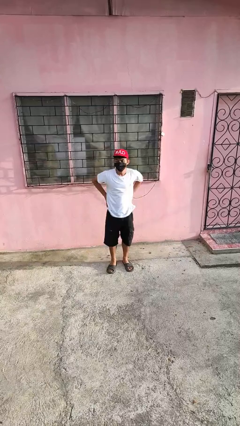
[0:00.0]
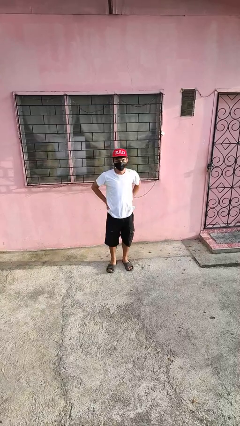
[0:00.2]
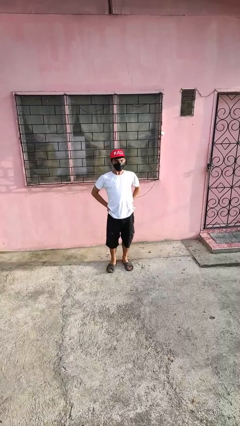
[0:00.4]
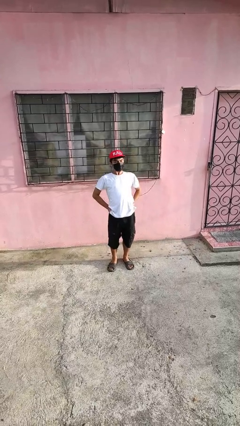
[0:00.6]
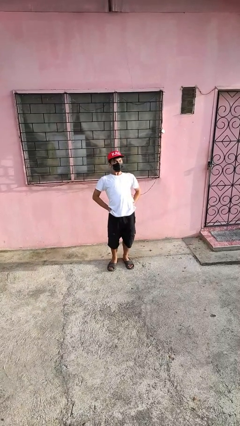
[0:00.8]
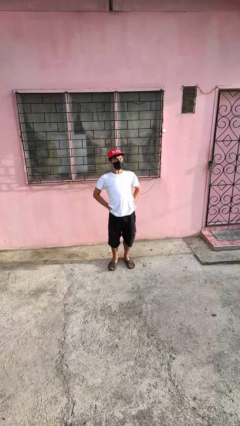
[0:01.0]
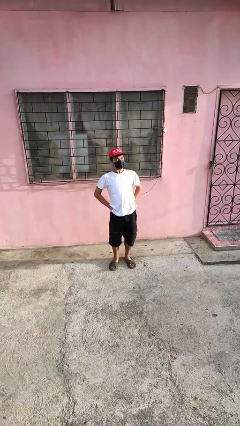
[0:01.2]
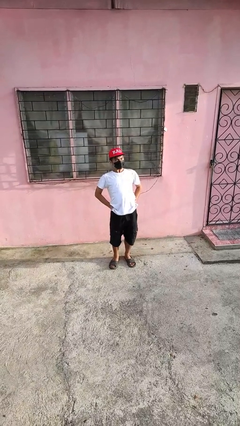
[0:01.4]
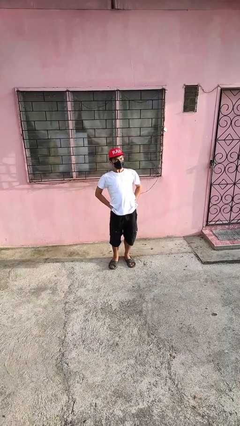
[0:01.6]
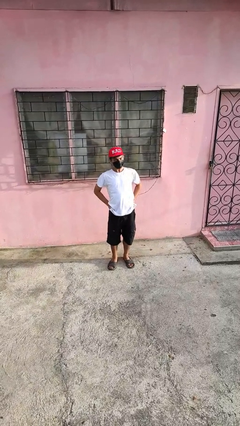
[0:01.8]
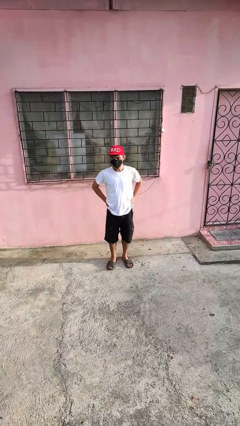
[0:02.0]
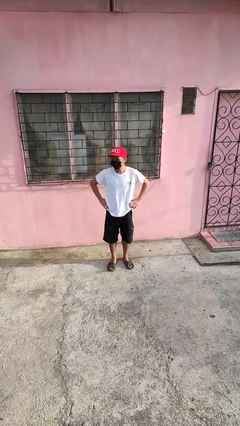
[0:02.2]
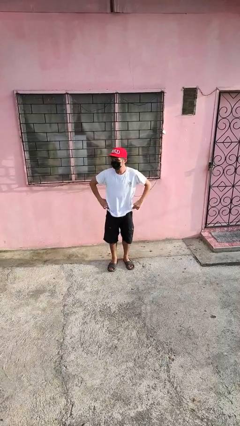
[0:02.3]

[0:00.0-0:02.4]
person stretches back

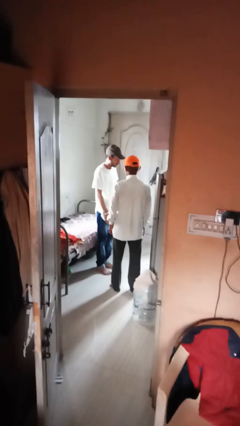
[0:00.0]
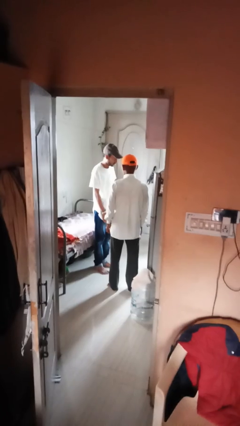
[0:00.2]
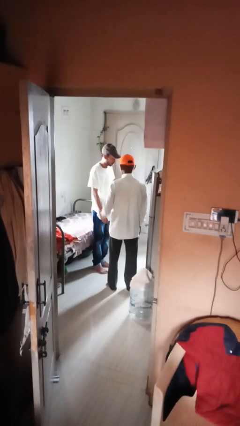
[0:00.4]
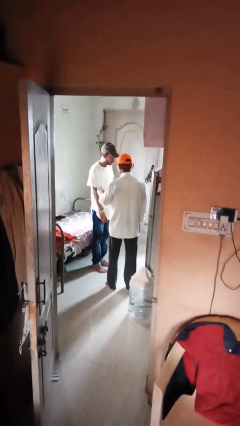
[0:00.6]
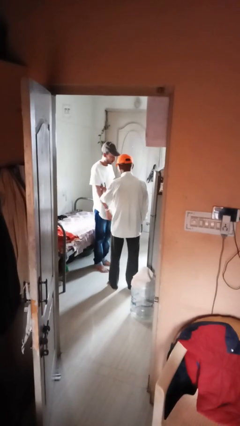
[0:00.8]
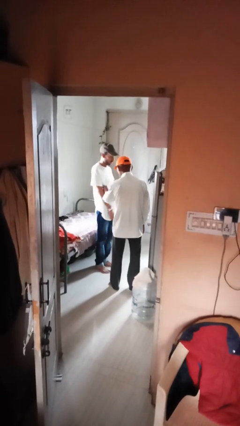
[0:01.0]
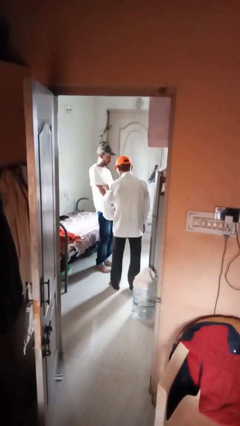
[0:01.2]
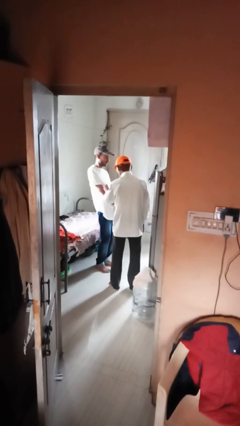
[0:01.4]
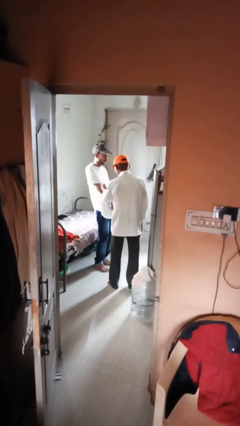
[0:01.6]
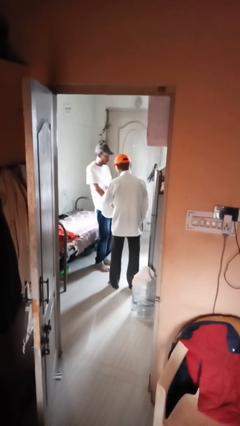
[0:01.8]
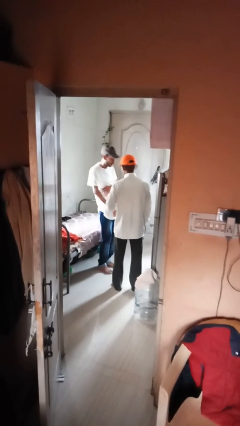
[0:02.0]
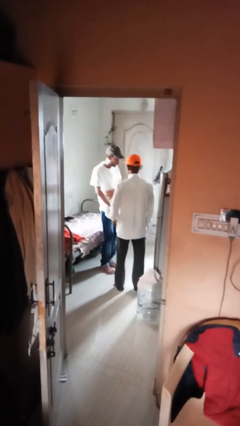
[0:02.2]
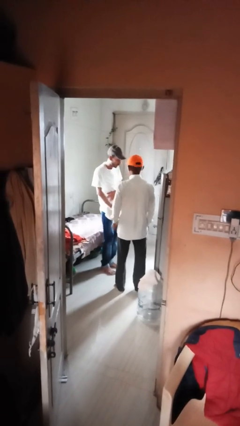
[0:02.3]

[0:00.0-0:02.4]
person tickles person

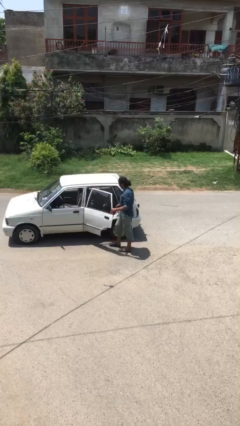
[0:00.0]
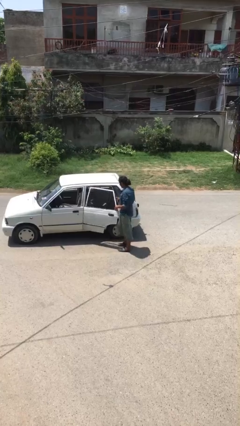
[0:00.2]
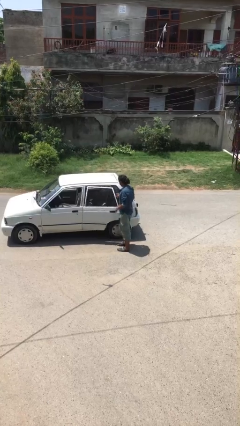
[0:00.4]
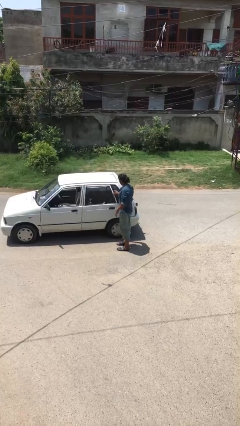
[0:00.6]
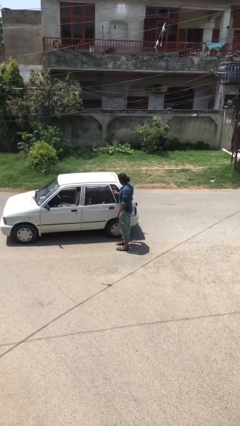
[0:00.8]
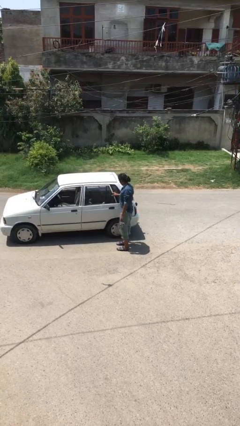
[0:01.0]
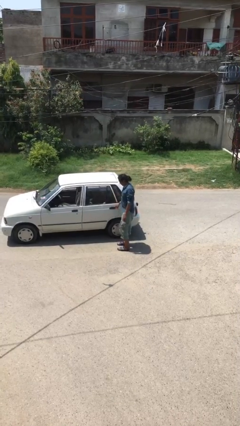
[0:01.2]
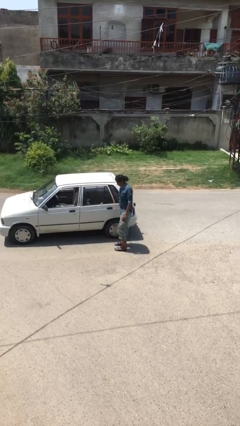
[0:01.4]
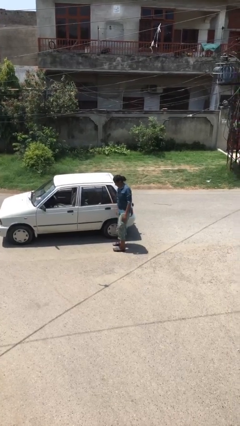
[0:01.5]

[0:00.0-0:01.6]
person closes car door

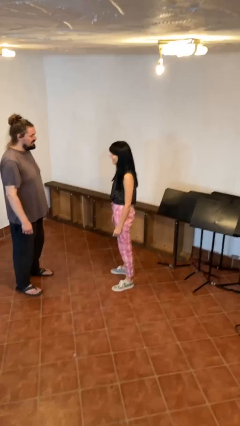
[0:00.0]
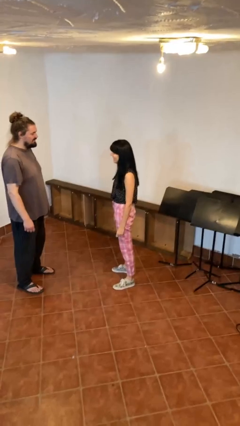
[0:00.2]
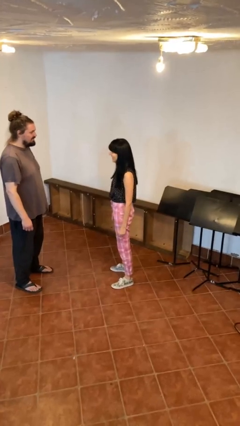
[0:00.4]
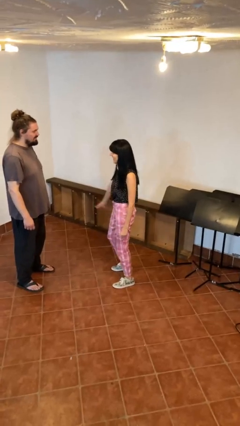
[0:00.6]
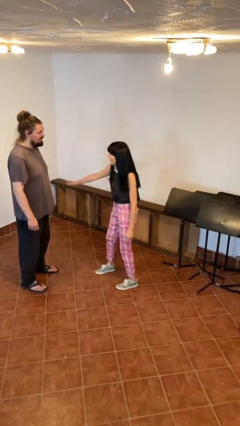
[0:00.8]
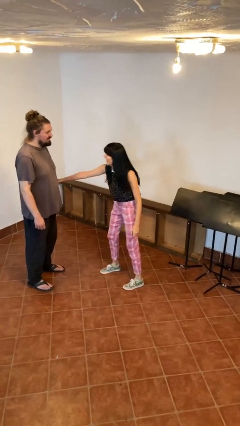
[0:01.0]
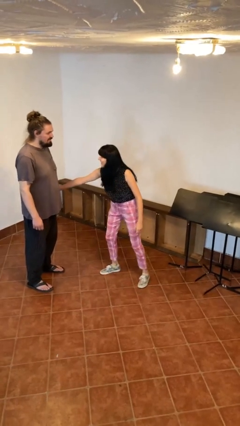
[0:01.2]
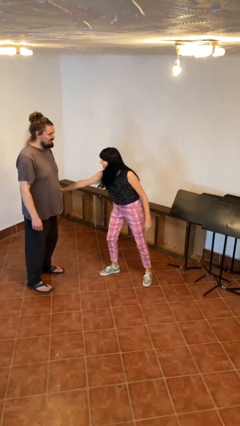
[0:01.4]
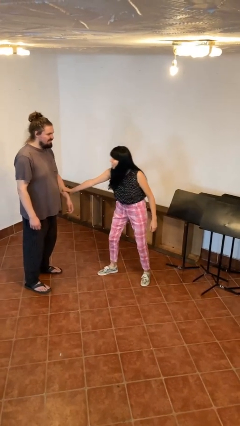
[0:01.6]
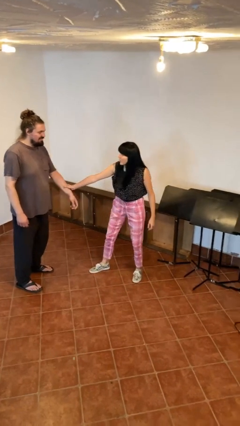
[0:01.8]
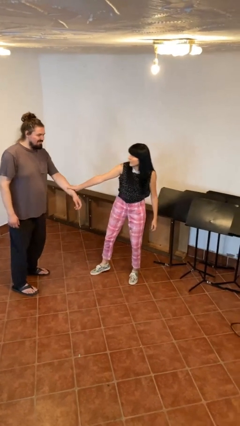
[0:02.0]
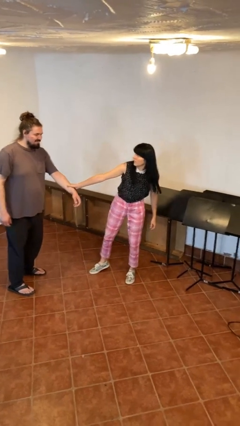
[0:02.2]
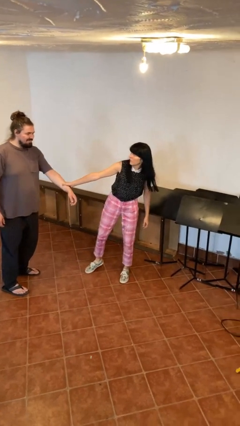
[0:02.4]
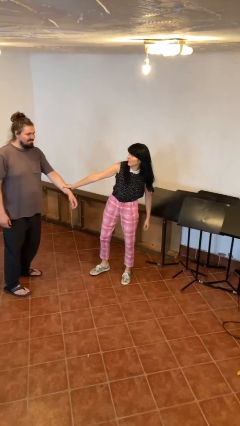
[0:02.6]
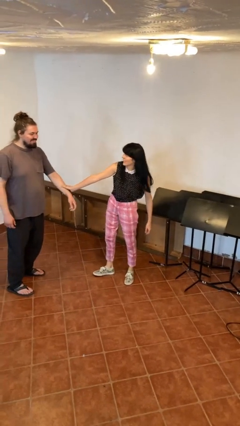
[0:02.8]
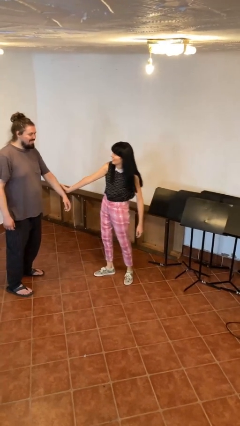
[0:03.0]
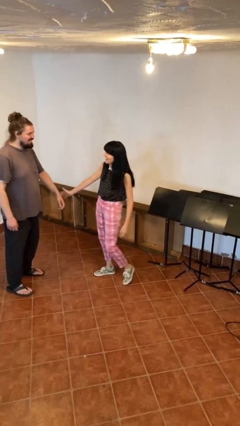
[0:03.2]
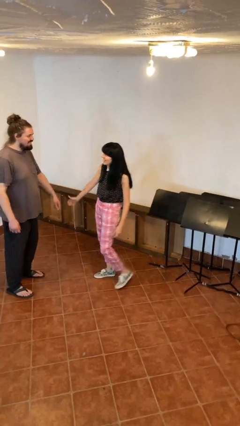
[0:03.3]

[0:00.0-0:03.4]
person grabs person by forearm

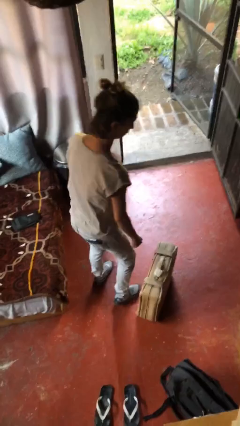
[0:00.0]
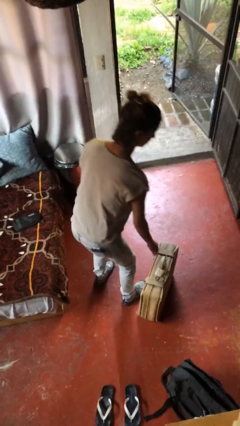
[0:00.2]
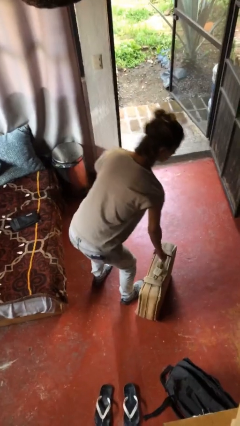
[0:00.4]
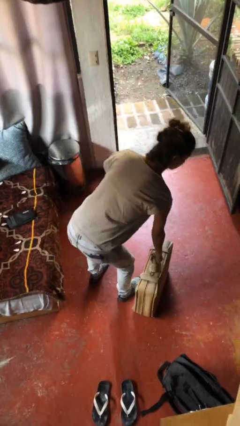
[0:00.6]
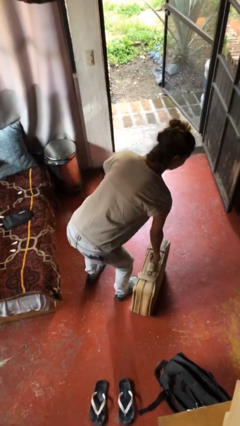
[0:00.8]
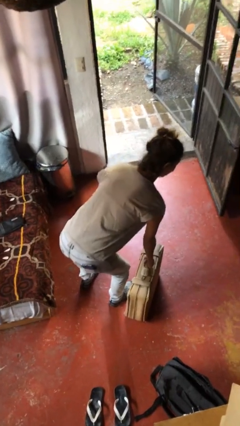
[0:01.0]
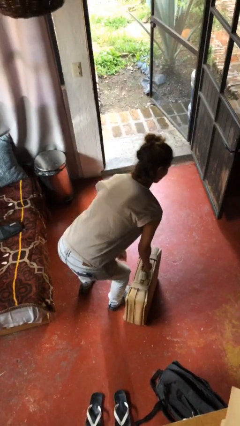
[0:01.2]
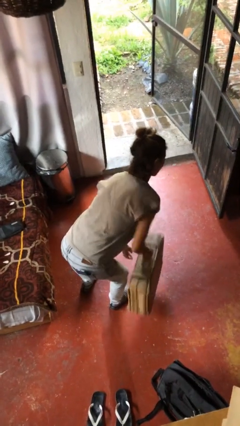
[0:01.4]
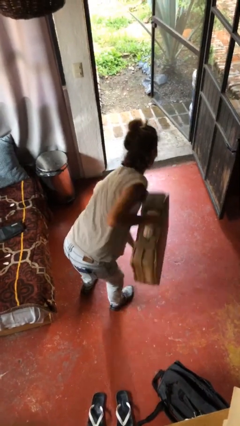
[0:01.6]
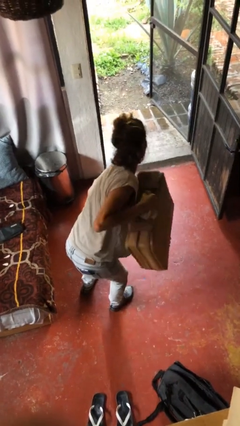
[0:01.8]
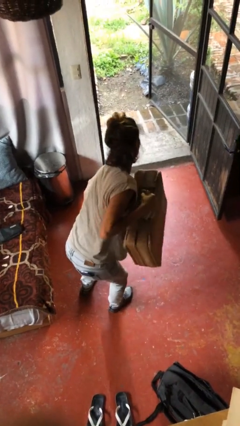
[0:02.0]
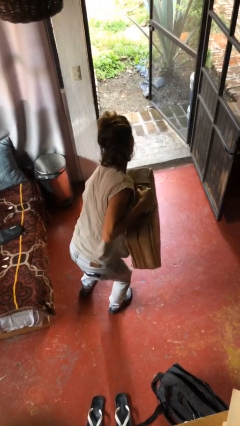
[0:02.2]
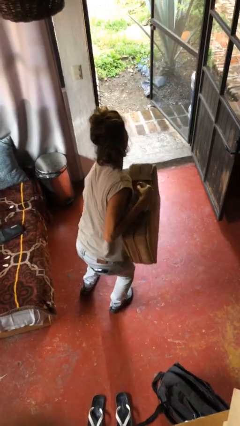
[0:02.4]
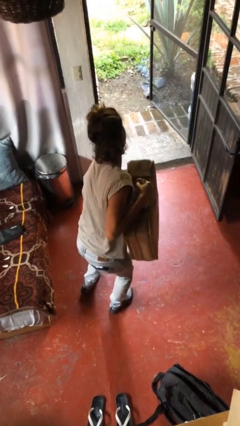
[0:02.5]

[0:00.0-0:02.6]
person picks up object from floor

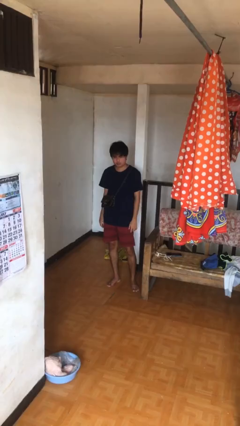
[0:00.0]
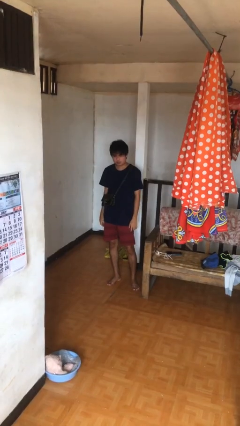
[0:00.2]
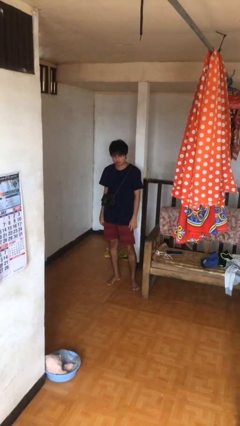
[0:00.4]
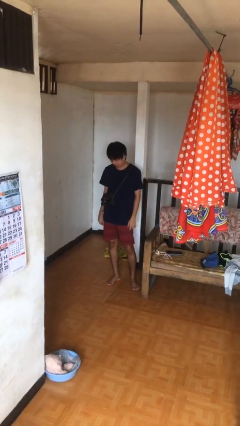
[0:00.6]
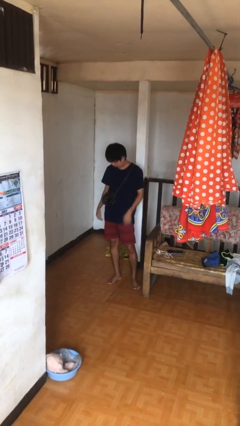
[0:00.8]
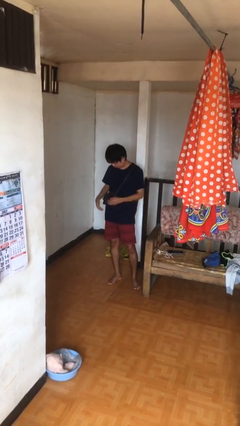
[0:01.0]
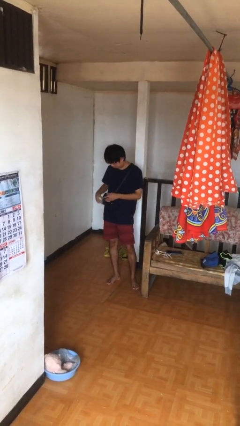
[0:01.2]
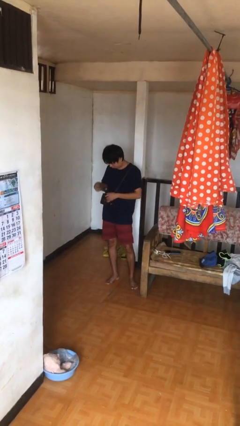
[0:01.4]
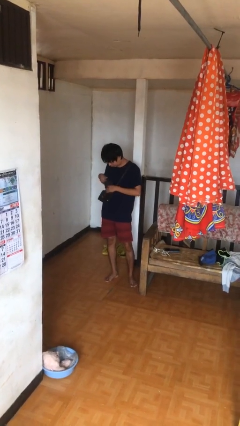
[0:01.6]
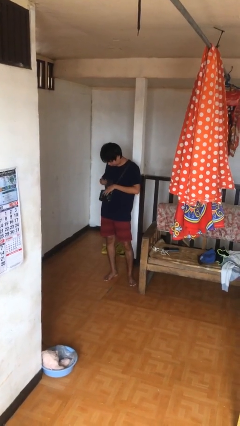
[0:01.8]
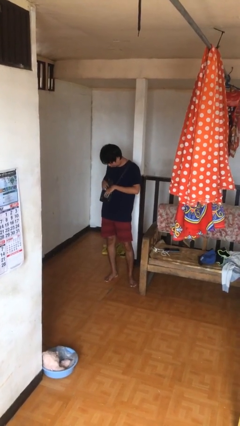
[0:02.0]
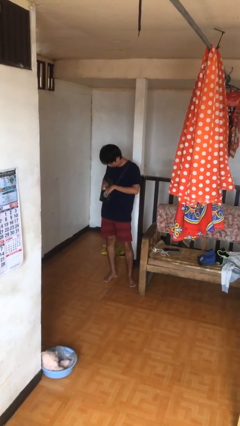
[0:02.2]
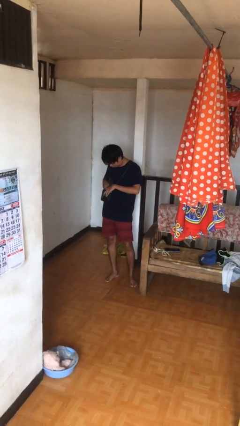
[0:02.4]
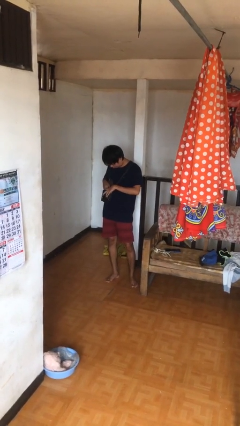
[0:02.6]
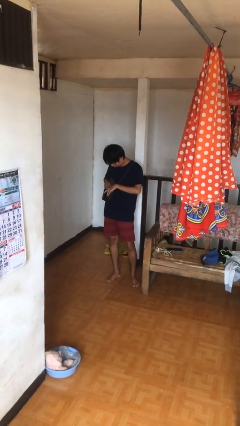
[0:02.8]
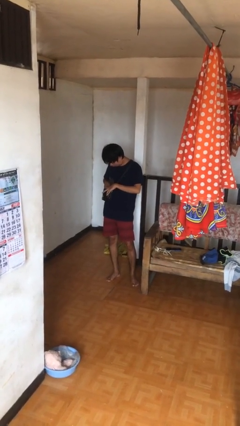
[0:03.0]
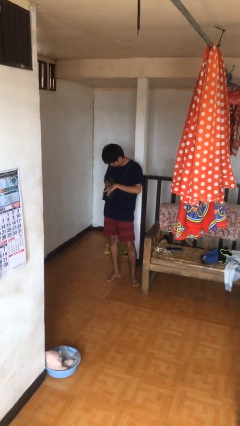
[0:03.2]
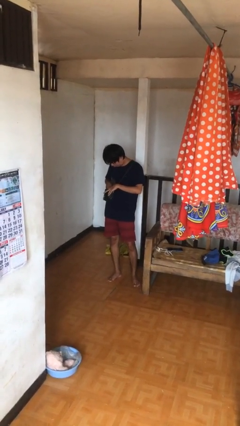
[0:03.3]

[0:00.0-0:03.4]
person searches in purse

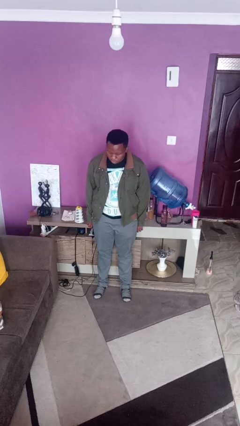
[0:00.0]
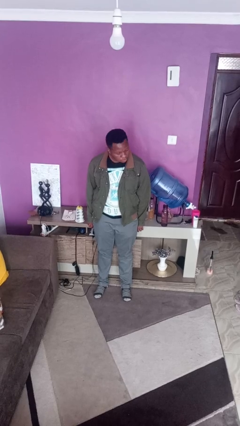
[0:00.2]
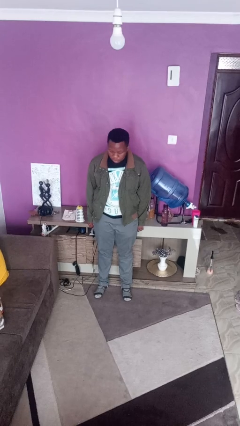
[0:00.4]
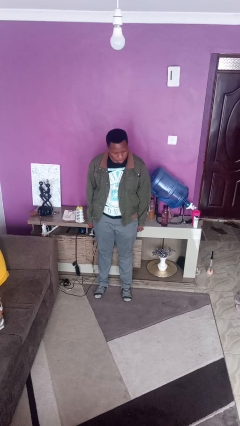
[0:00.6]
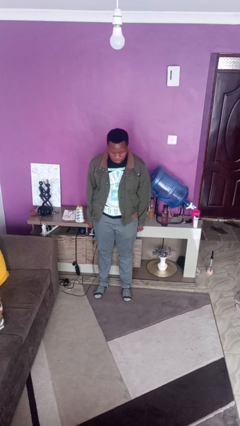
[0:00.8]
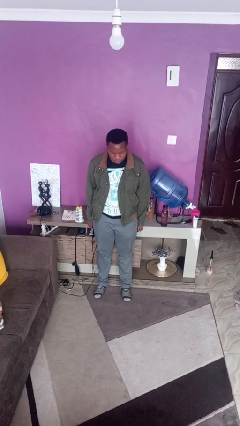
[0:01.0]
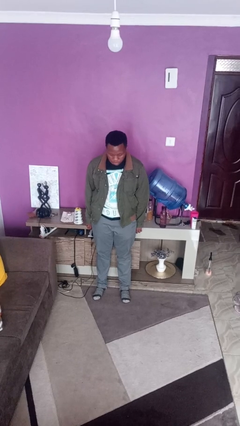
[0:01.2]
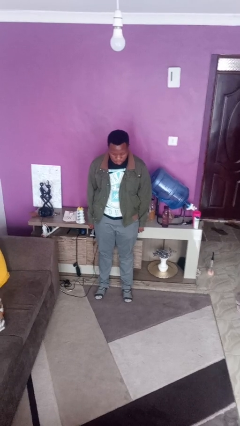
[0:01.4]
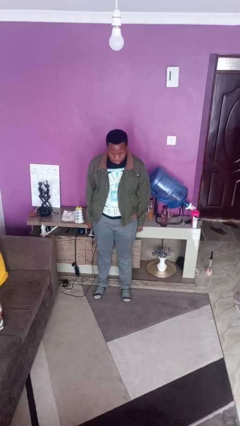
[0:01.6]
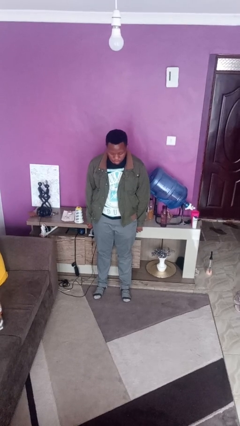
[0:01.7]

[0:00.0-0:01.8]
person shakes head
